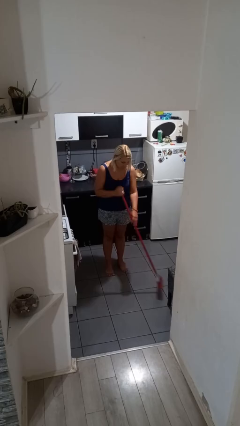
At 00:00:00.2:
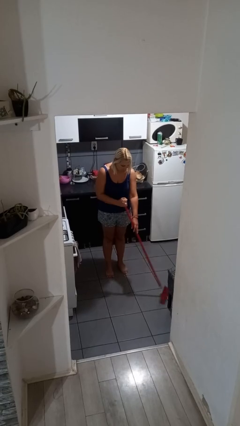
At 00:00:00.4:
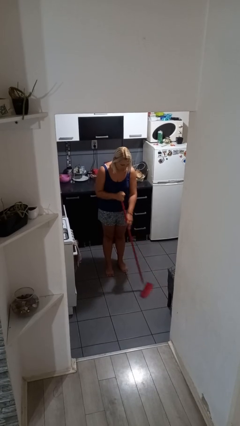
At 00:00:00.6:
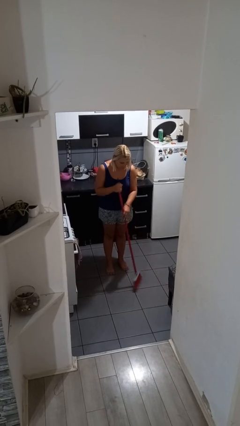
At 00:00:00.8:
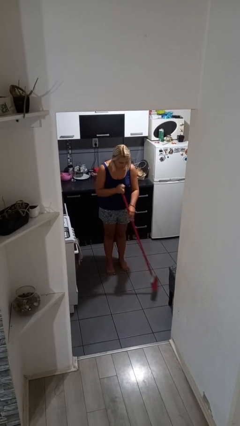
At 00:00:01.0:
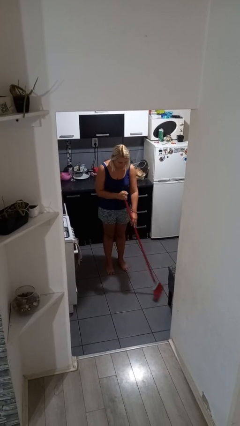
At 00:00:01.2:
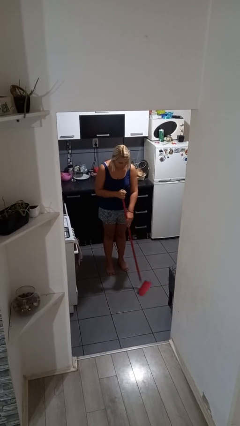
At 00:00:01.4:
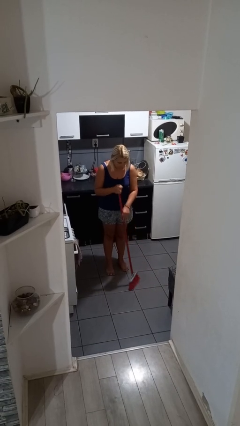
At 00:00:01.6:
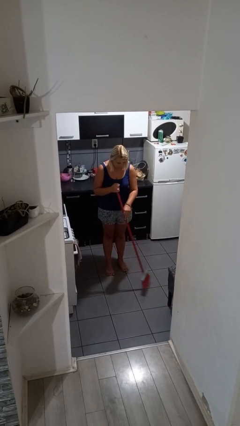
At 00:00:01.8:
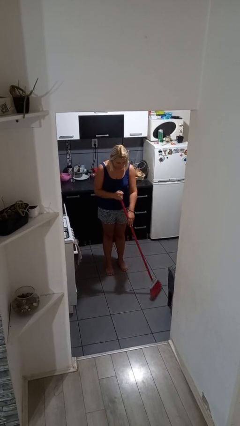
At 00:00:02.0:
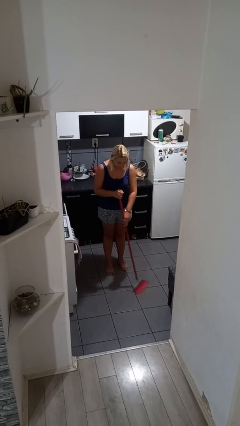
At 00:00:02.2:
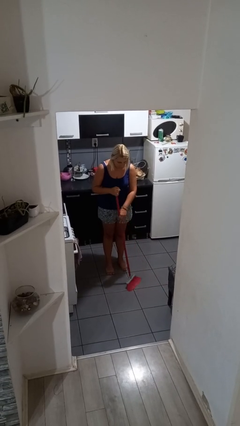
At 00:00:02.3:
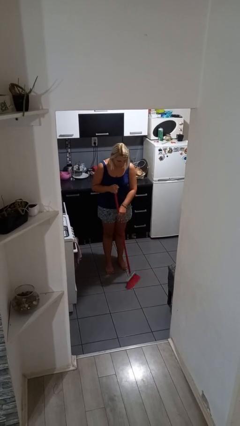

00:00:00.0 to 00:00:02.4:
person sweeps floor

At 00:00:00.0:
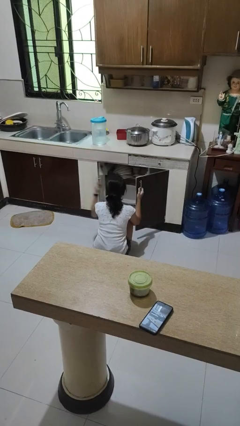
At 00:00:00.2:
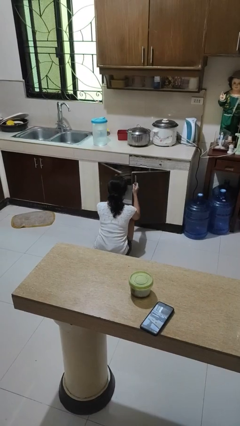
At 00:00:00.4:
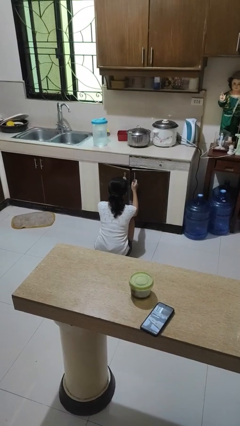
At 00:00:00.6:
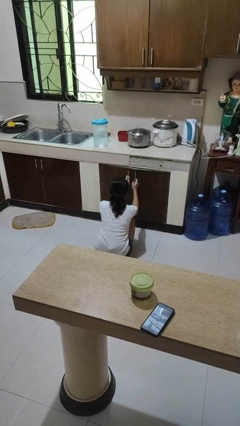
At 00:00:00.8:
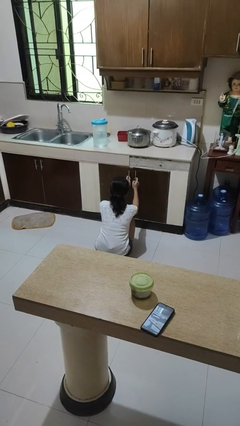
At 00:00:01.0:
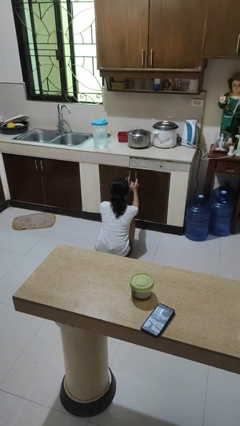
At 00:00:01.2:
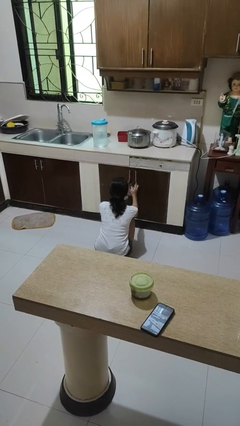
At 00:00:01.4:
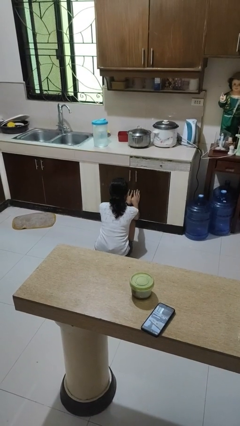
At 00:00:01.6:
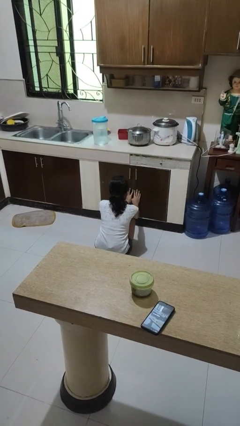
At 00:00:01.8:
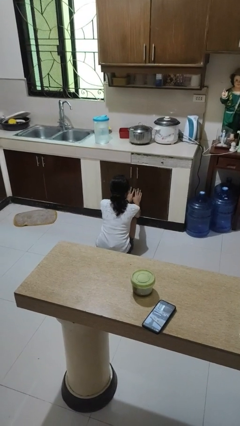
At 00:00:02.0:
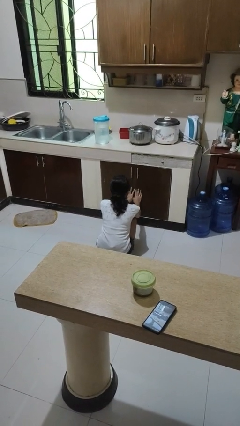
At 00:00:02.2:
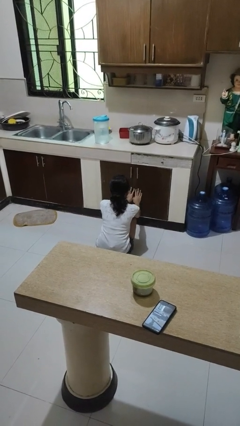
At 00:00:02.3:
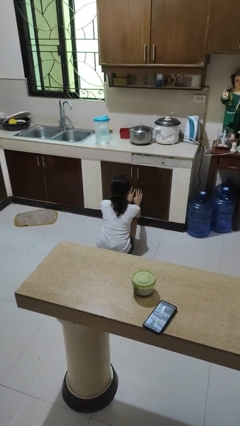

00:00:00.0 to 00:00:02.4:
person closes dishwasher

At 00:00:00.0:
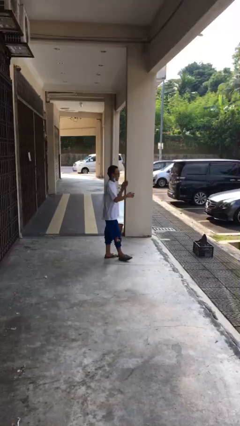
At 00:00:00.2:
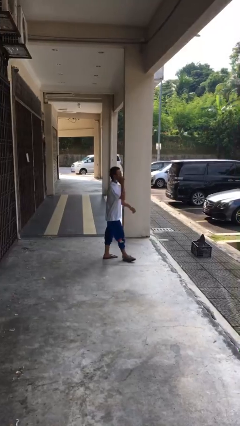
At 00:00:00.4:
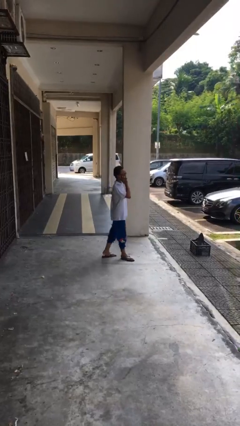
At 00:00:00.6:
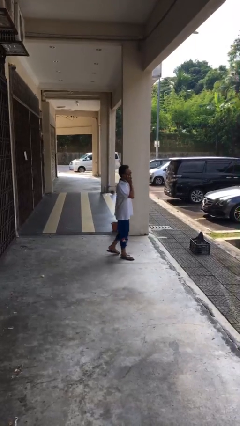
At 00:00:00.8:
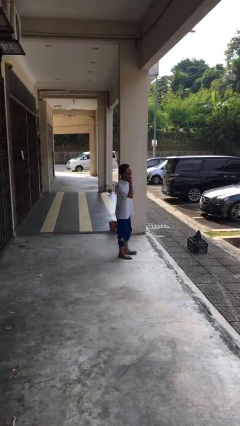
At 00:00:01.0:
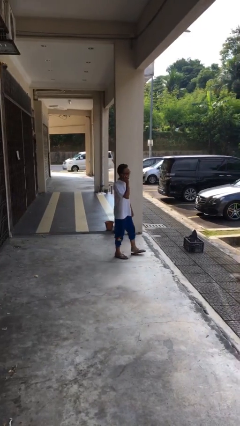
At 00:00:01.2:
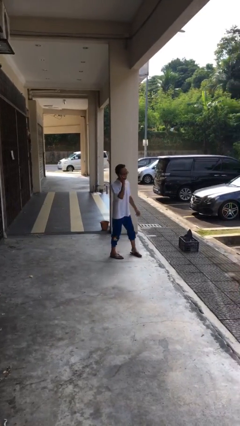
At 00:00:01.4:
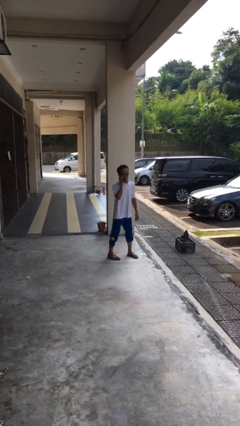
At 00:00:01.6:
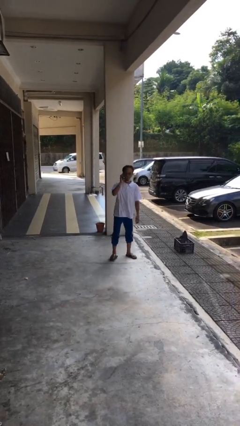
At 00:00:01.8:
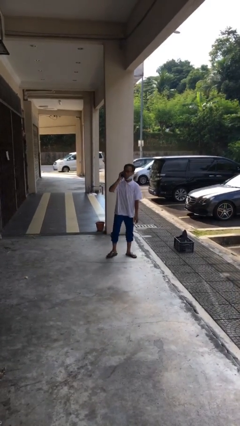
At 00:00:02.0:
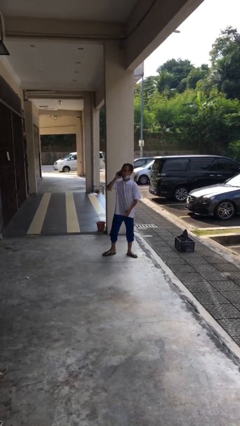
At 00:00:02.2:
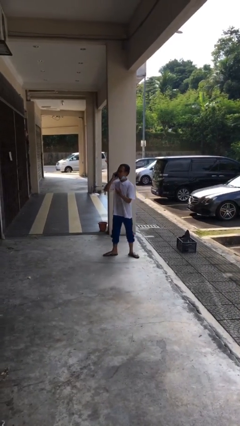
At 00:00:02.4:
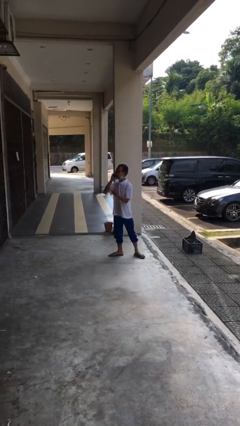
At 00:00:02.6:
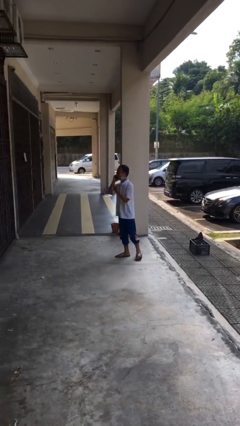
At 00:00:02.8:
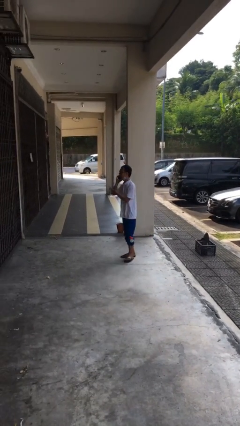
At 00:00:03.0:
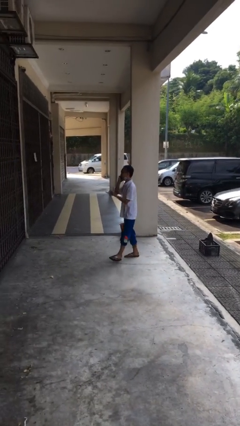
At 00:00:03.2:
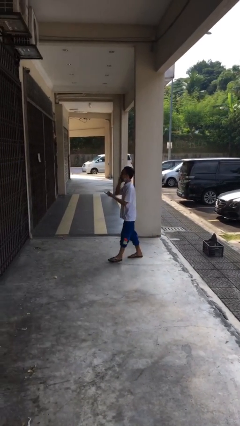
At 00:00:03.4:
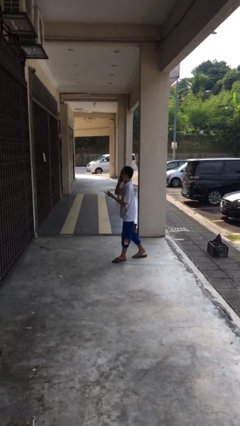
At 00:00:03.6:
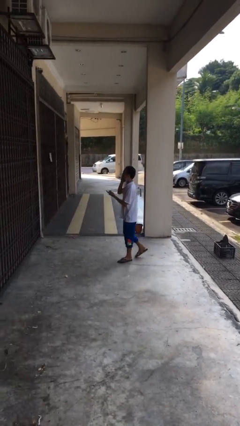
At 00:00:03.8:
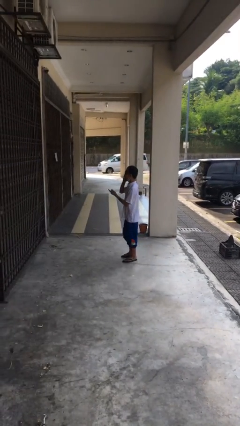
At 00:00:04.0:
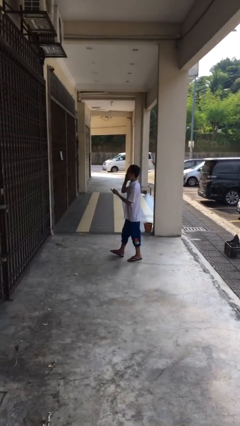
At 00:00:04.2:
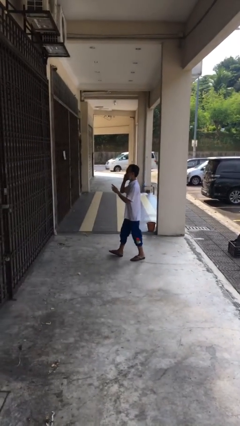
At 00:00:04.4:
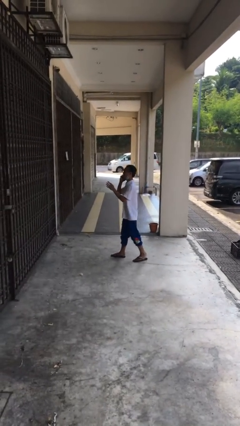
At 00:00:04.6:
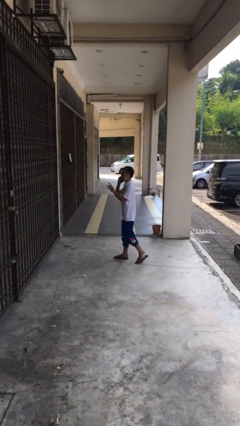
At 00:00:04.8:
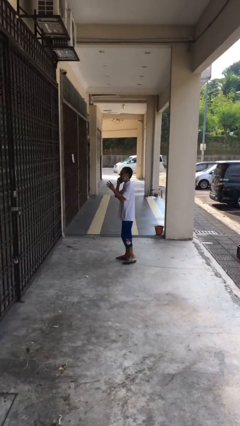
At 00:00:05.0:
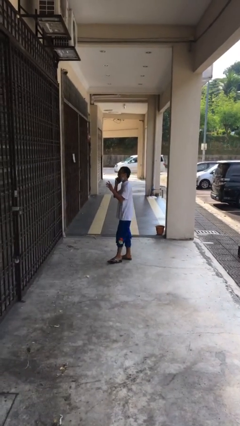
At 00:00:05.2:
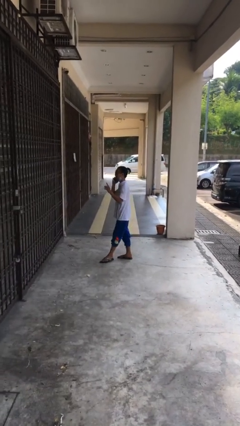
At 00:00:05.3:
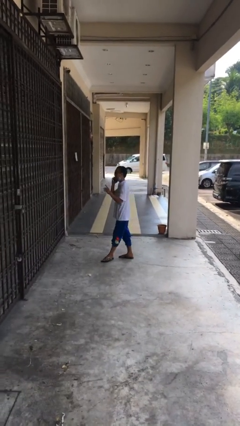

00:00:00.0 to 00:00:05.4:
person talks on phone

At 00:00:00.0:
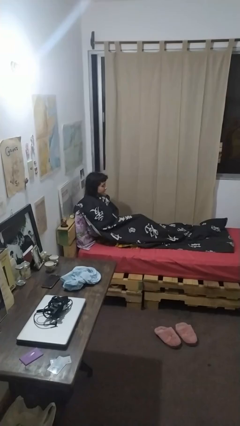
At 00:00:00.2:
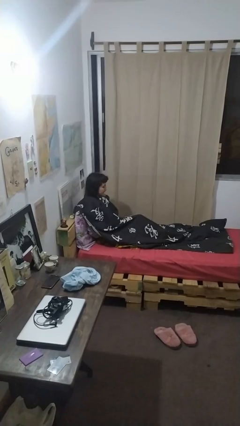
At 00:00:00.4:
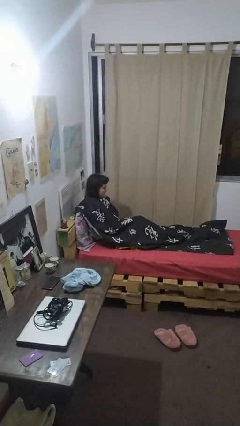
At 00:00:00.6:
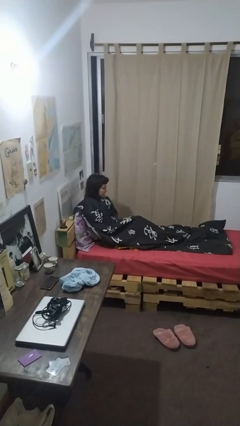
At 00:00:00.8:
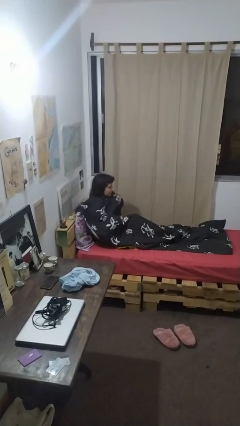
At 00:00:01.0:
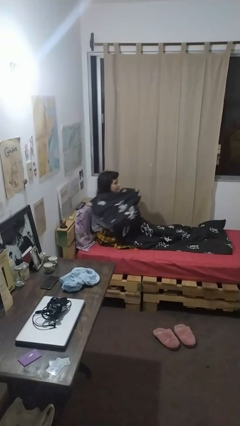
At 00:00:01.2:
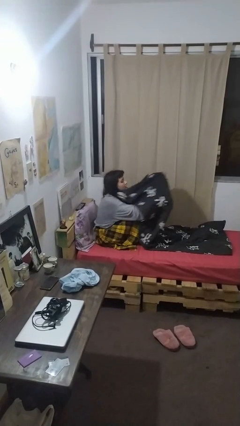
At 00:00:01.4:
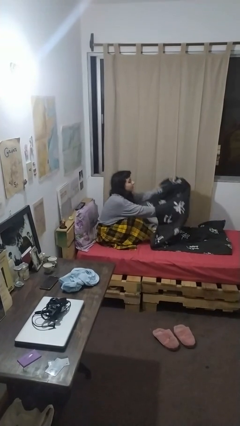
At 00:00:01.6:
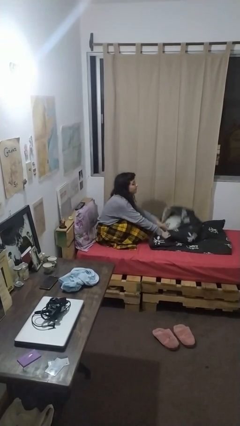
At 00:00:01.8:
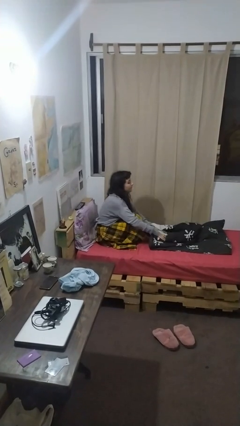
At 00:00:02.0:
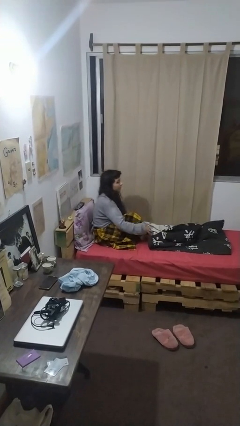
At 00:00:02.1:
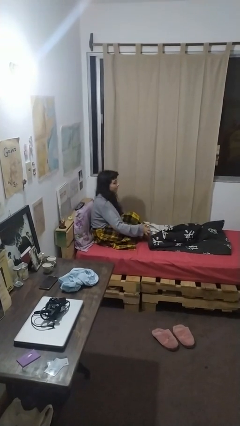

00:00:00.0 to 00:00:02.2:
person uncovers with blanket

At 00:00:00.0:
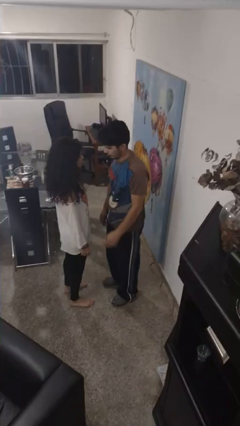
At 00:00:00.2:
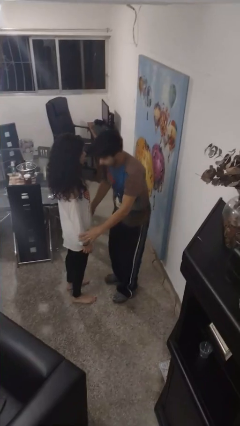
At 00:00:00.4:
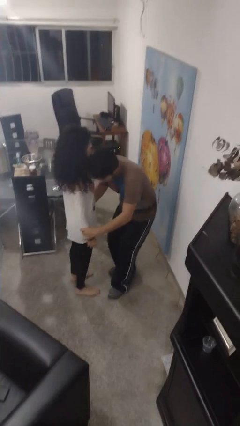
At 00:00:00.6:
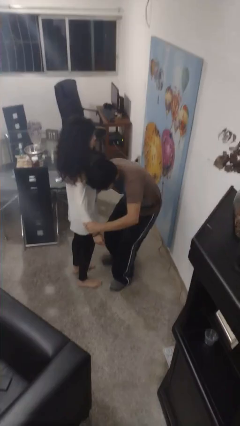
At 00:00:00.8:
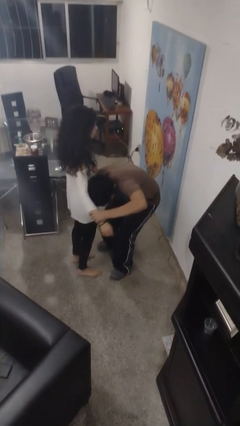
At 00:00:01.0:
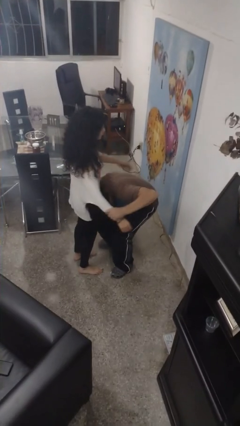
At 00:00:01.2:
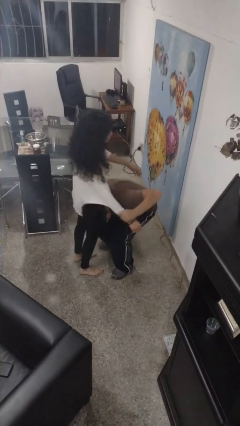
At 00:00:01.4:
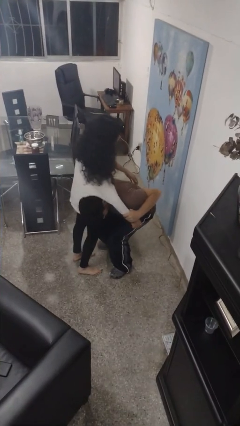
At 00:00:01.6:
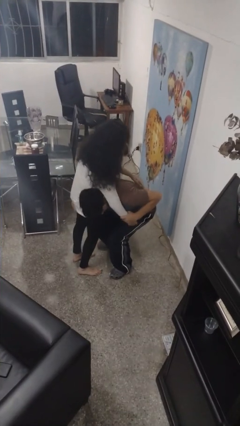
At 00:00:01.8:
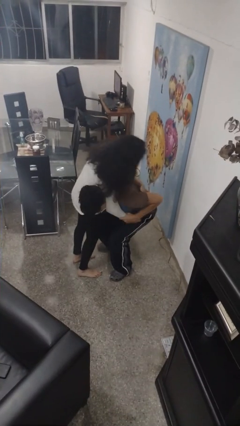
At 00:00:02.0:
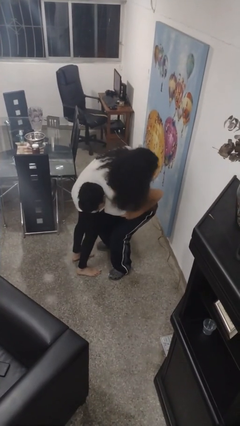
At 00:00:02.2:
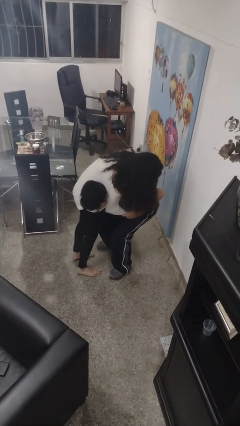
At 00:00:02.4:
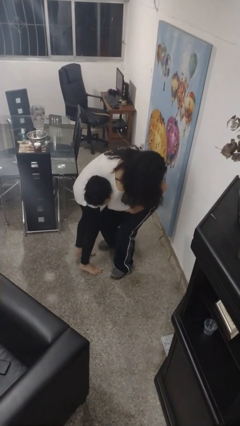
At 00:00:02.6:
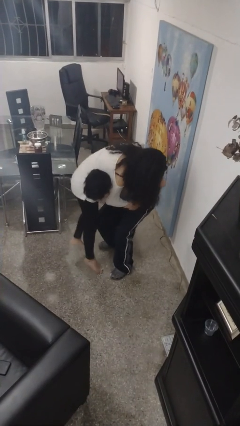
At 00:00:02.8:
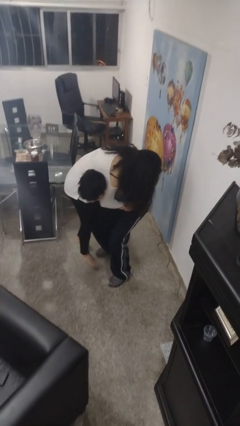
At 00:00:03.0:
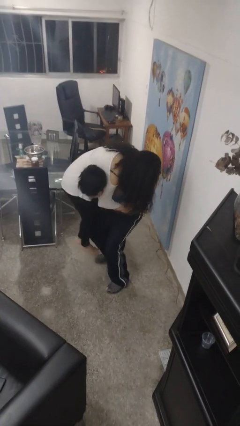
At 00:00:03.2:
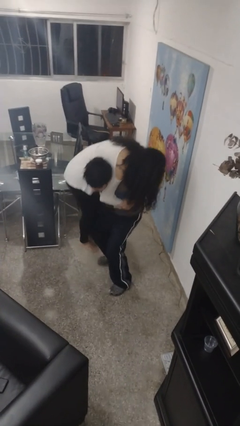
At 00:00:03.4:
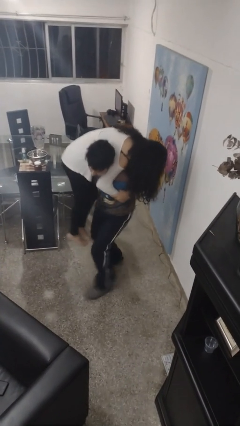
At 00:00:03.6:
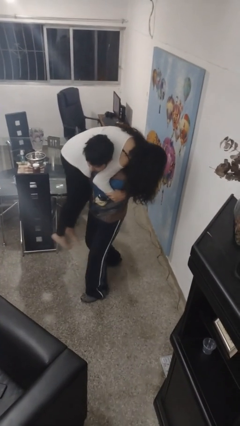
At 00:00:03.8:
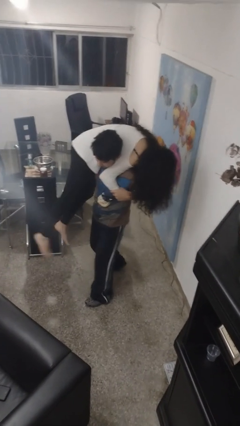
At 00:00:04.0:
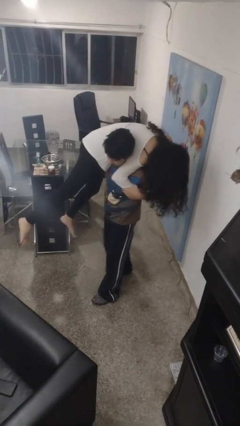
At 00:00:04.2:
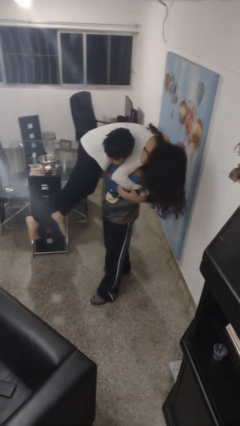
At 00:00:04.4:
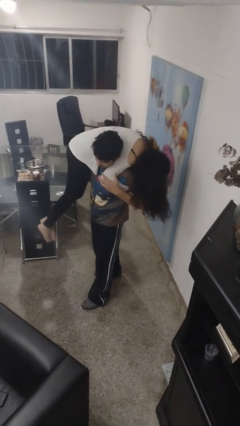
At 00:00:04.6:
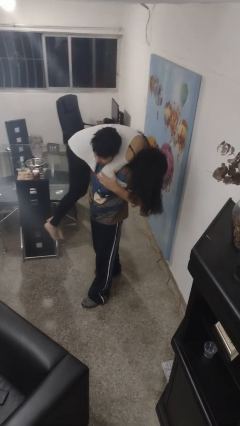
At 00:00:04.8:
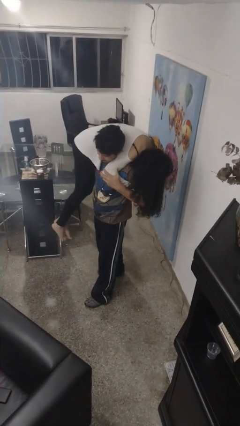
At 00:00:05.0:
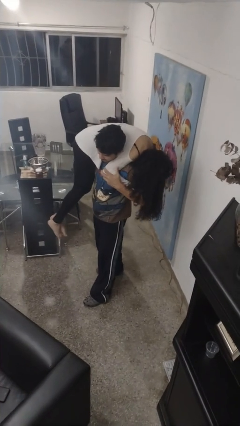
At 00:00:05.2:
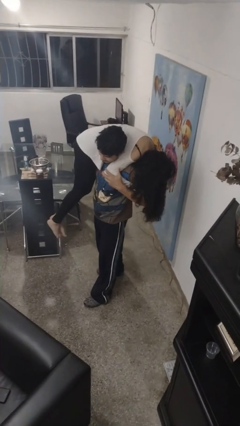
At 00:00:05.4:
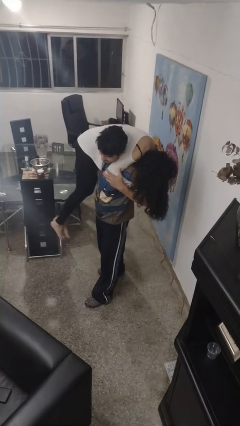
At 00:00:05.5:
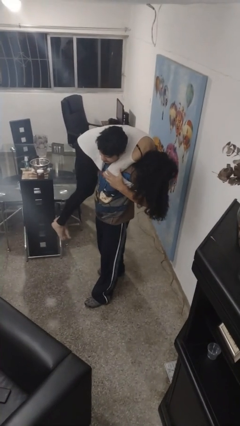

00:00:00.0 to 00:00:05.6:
person carries person over shoulder
